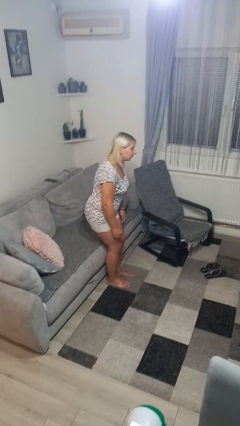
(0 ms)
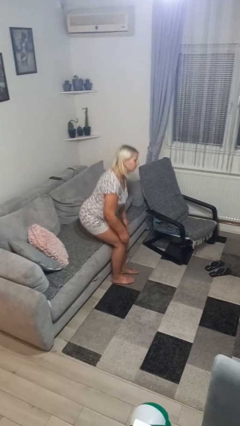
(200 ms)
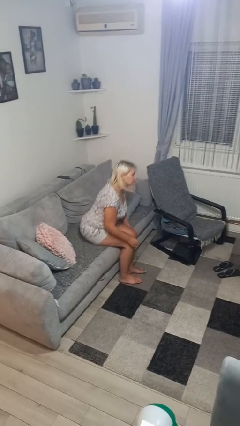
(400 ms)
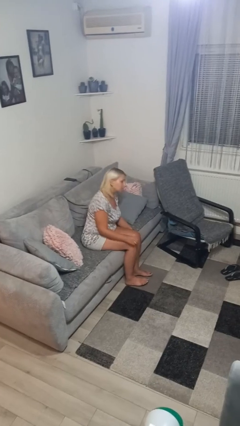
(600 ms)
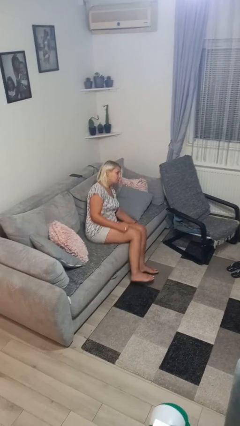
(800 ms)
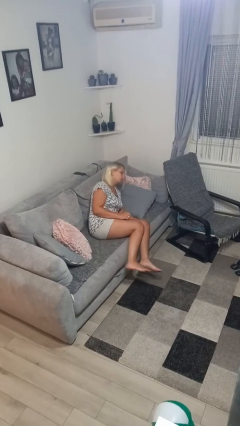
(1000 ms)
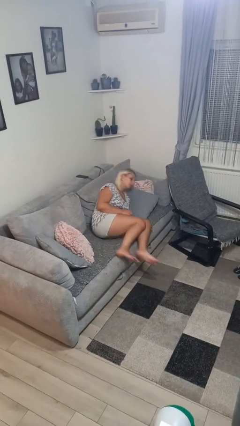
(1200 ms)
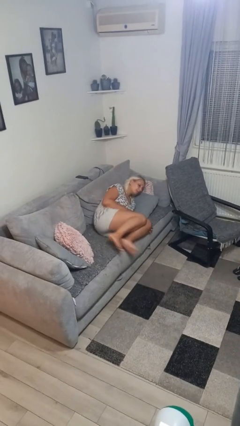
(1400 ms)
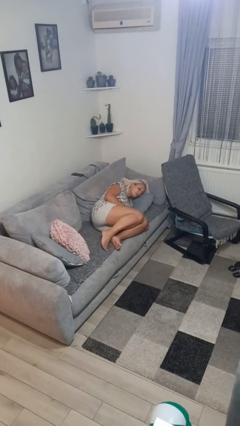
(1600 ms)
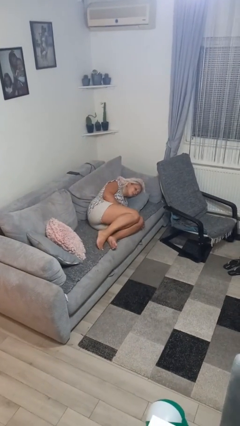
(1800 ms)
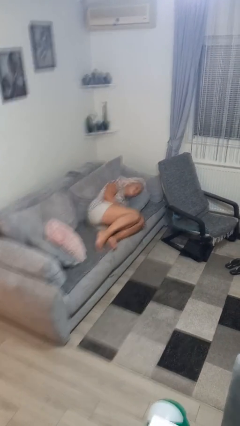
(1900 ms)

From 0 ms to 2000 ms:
person lies down on couch

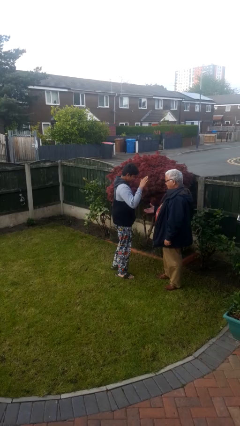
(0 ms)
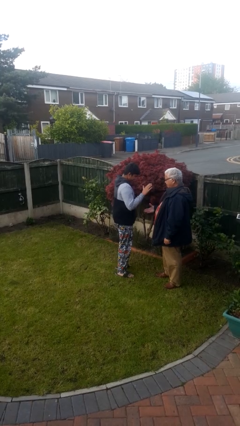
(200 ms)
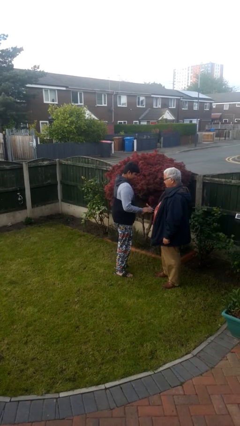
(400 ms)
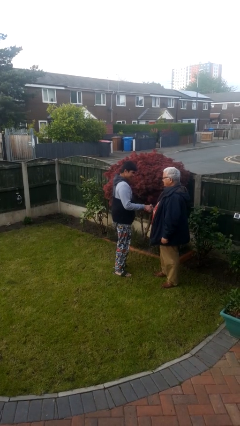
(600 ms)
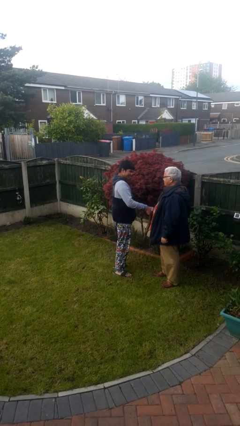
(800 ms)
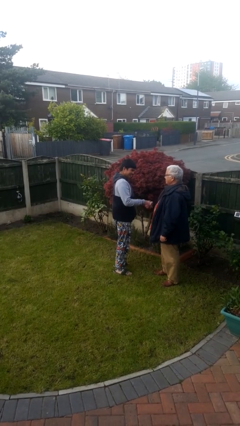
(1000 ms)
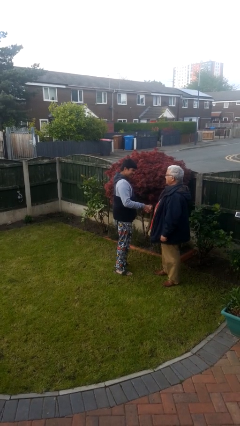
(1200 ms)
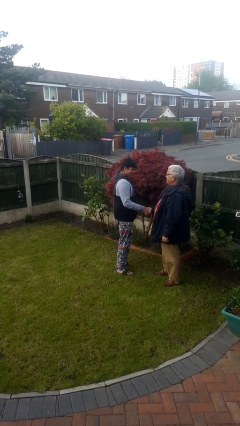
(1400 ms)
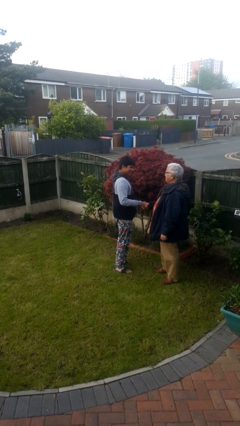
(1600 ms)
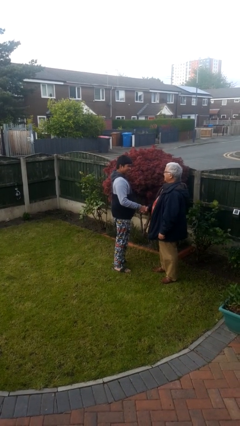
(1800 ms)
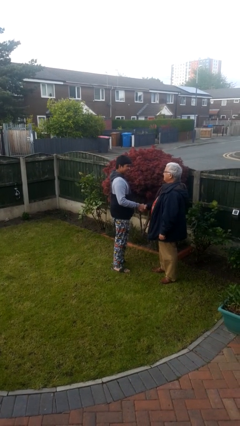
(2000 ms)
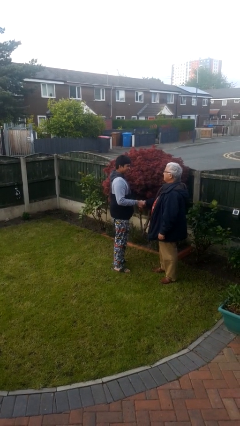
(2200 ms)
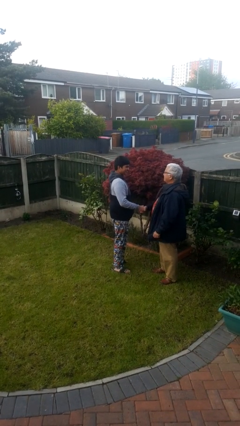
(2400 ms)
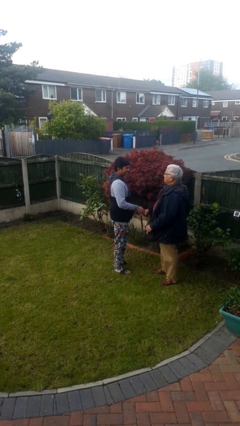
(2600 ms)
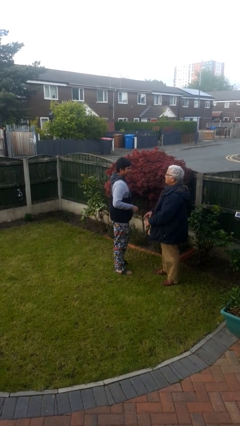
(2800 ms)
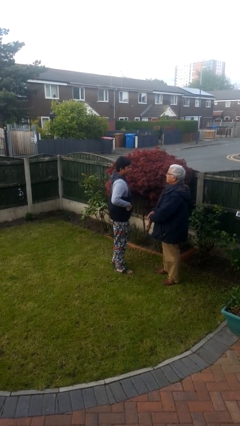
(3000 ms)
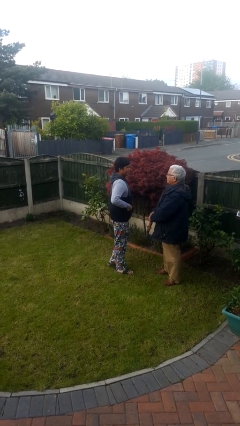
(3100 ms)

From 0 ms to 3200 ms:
person highfives hand

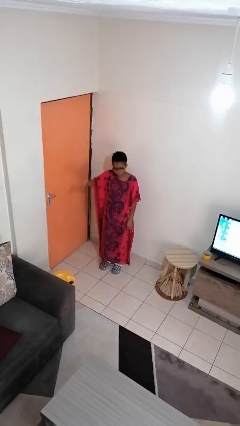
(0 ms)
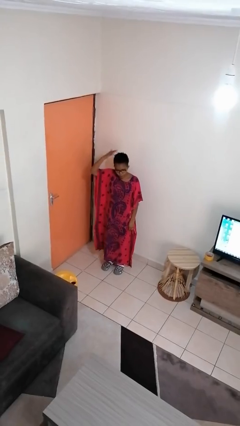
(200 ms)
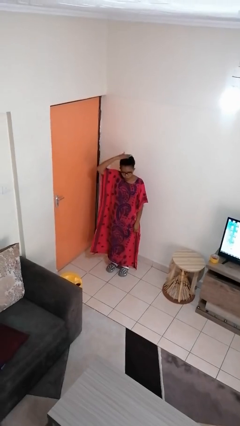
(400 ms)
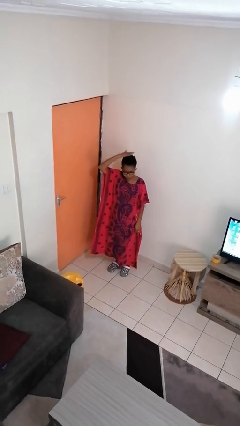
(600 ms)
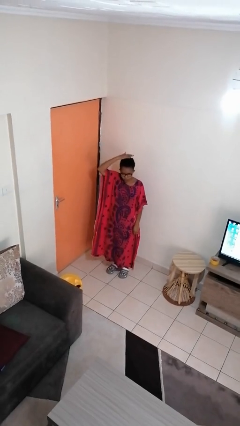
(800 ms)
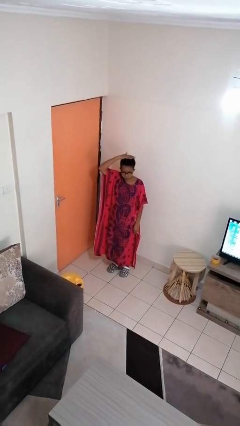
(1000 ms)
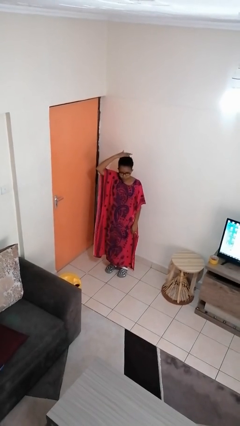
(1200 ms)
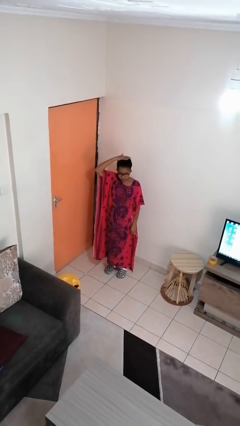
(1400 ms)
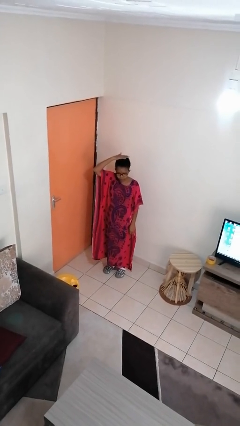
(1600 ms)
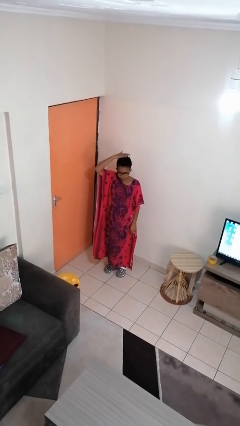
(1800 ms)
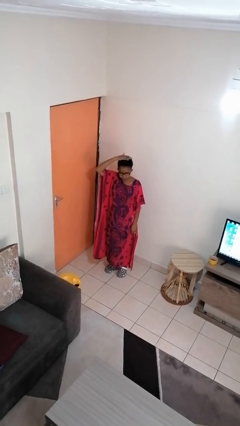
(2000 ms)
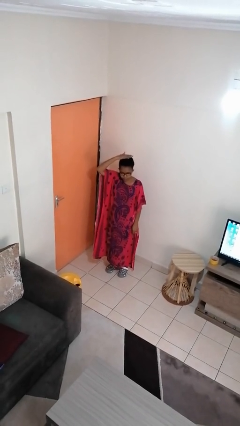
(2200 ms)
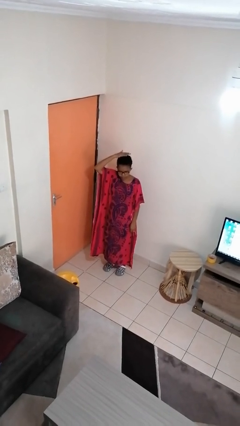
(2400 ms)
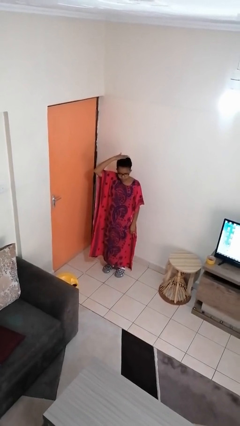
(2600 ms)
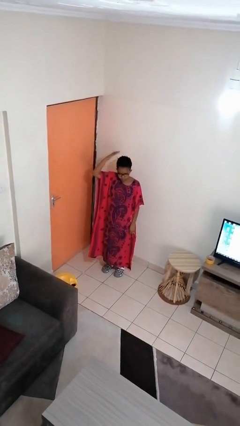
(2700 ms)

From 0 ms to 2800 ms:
person pats head

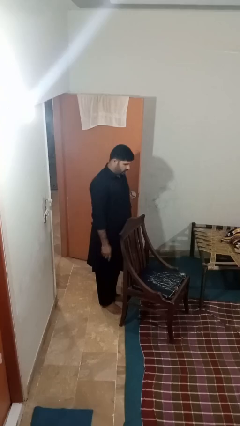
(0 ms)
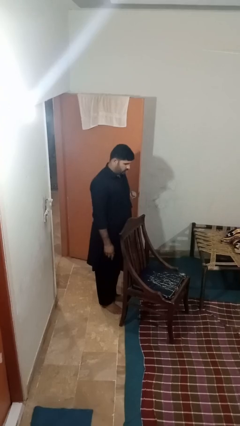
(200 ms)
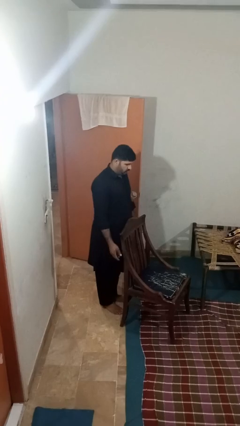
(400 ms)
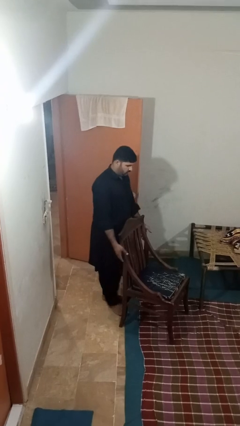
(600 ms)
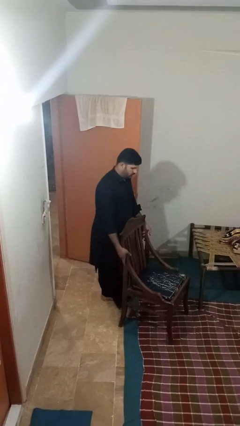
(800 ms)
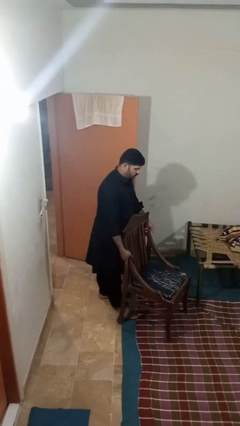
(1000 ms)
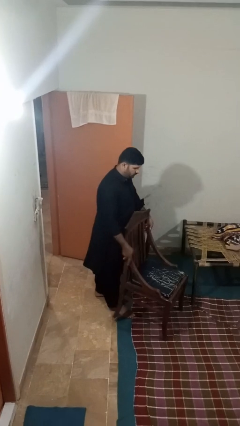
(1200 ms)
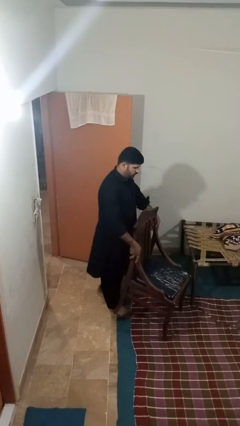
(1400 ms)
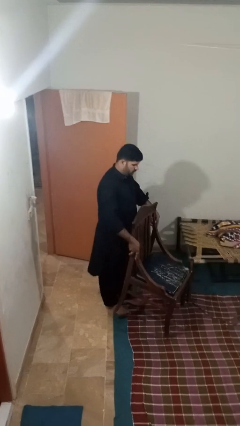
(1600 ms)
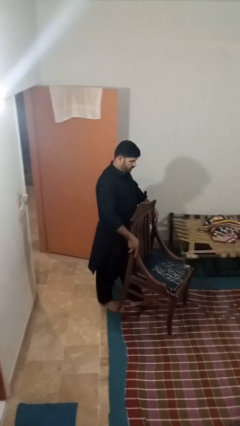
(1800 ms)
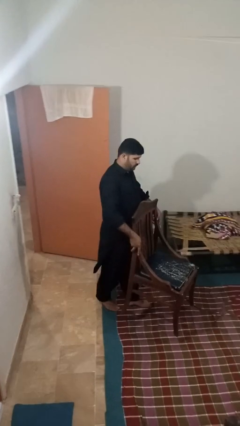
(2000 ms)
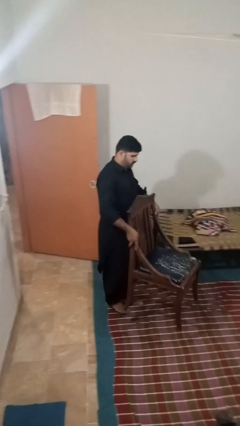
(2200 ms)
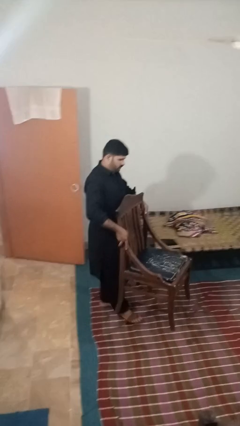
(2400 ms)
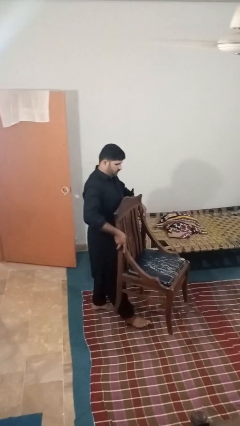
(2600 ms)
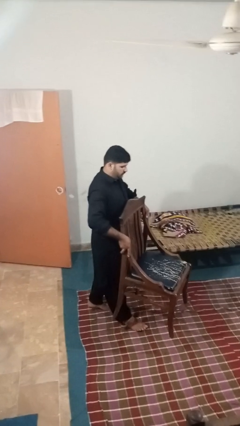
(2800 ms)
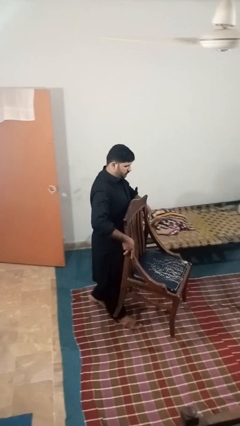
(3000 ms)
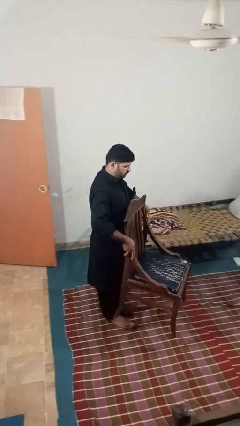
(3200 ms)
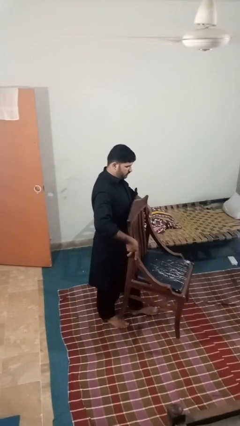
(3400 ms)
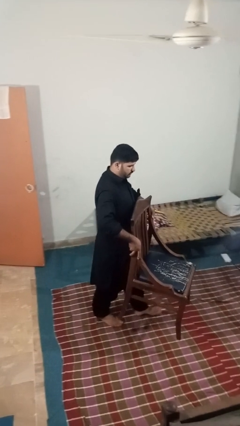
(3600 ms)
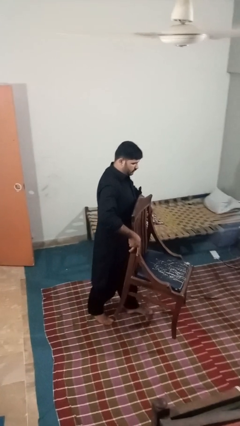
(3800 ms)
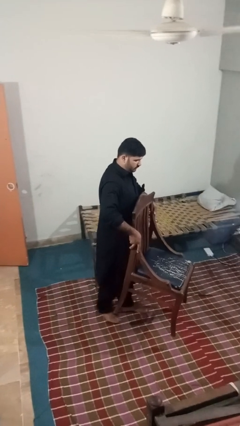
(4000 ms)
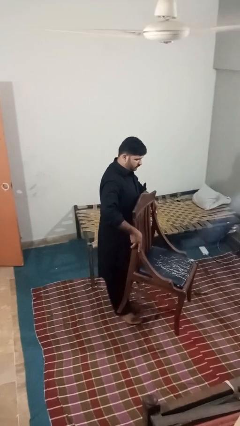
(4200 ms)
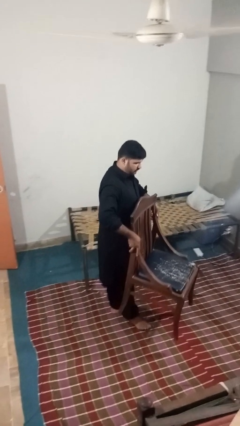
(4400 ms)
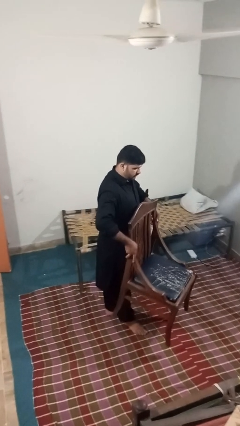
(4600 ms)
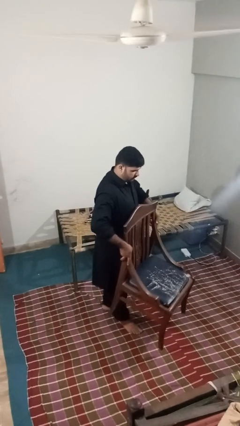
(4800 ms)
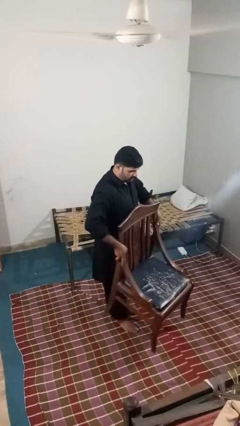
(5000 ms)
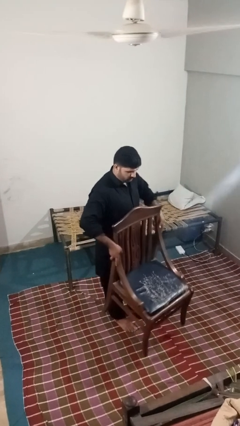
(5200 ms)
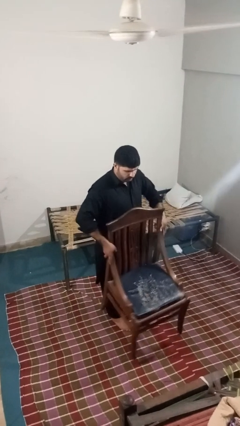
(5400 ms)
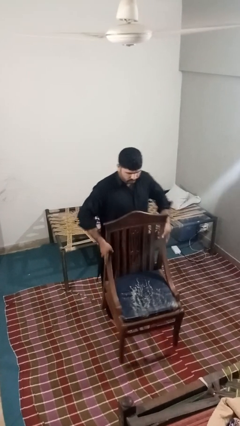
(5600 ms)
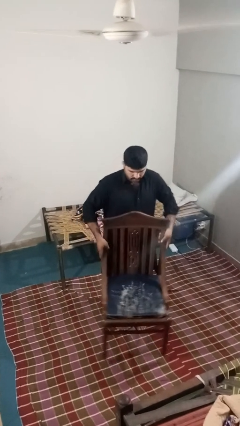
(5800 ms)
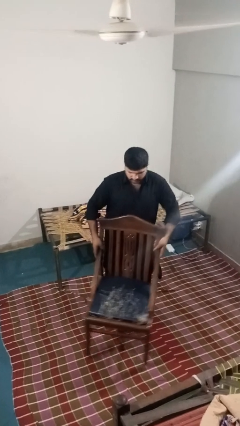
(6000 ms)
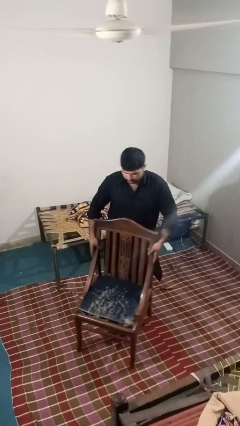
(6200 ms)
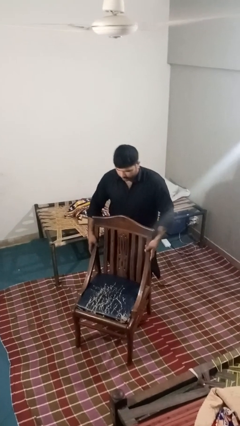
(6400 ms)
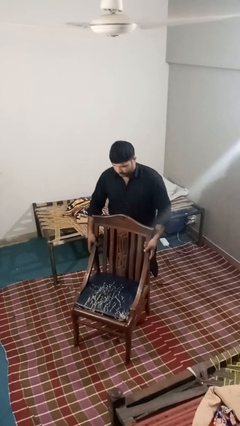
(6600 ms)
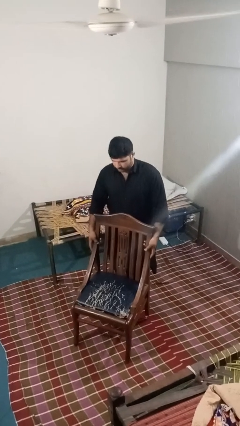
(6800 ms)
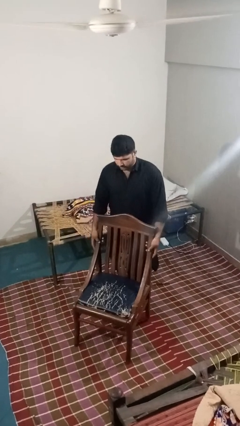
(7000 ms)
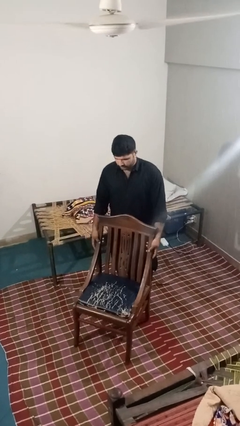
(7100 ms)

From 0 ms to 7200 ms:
person carries furniture

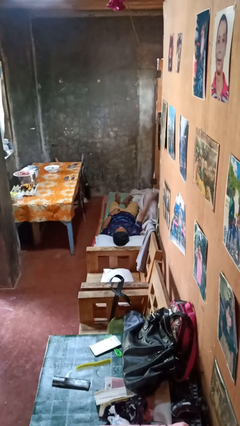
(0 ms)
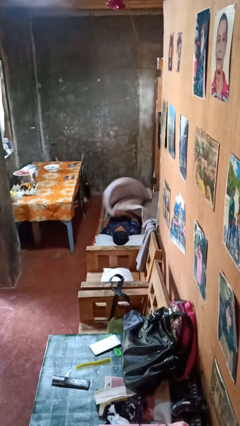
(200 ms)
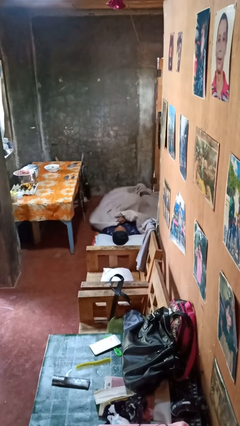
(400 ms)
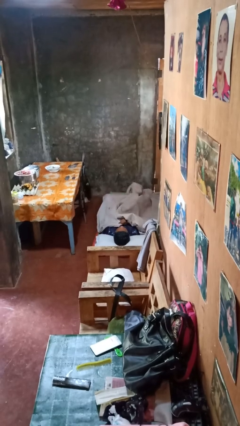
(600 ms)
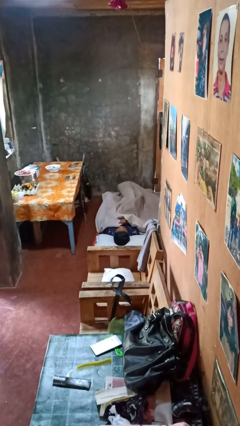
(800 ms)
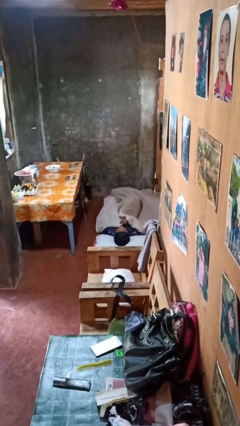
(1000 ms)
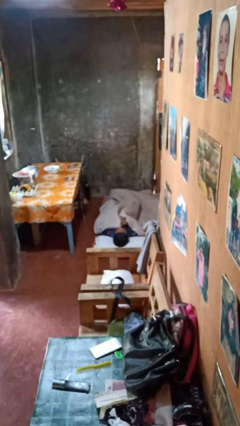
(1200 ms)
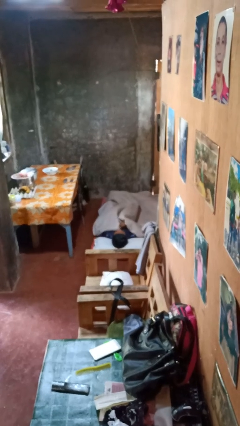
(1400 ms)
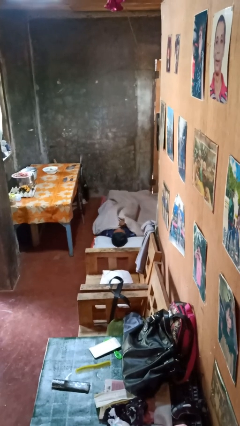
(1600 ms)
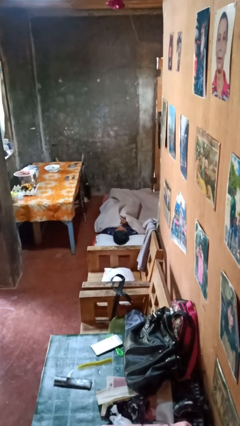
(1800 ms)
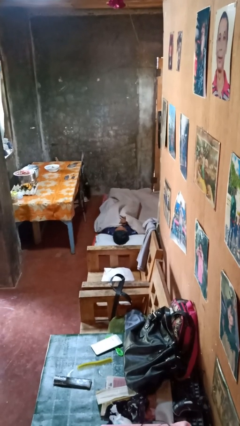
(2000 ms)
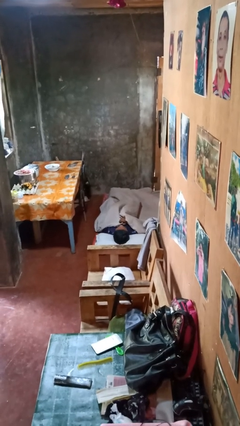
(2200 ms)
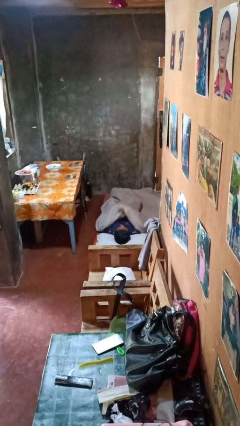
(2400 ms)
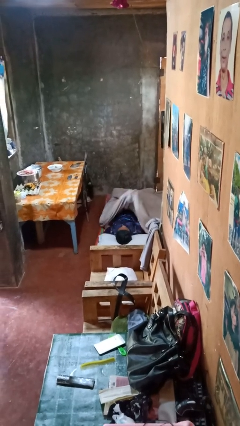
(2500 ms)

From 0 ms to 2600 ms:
person covers with bedsheets
